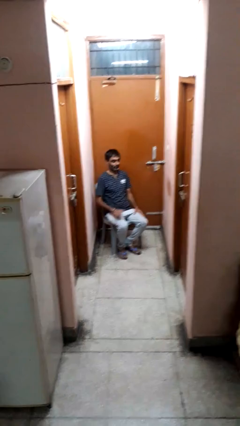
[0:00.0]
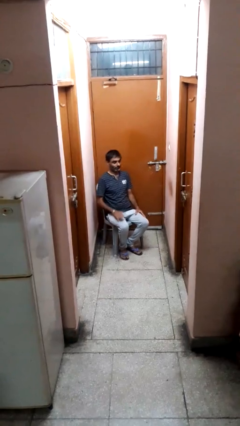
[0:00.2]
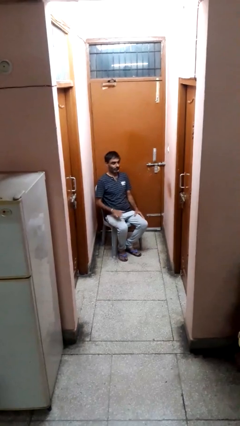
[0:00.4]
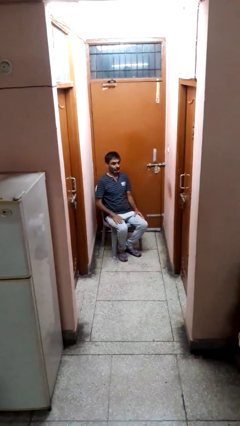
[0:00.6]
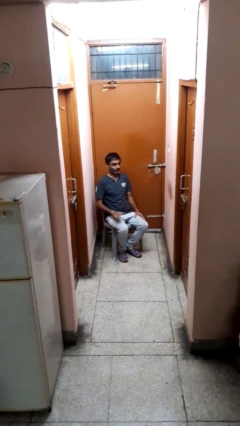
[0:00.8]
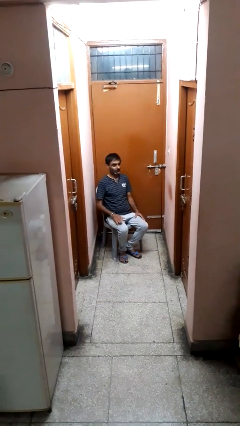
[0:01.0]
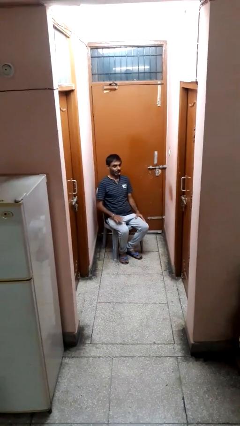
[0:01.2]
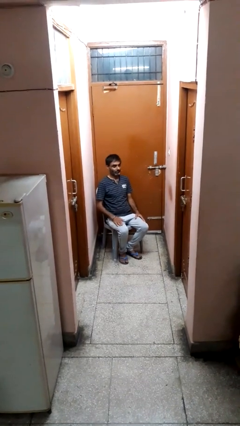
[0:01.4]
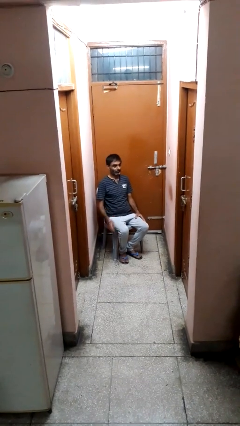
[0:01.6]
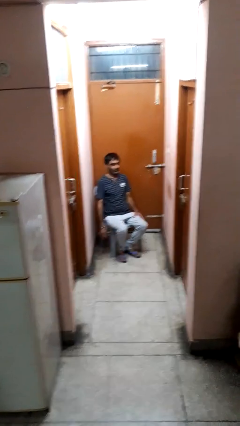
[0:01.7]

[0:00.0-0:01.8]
person slaps hands on thighs

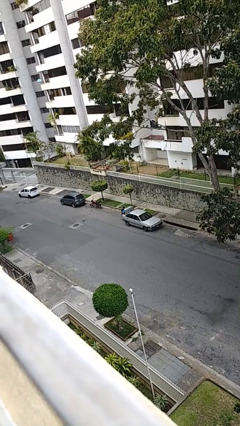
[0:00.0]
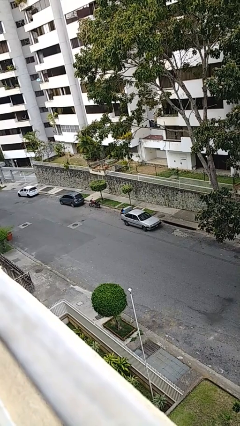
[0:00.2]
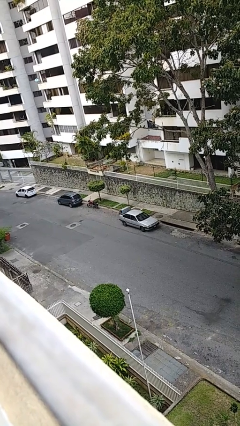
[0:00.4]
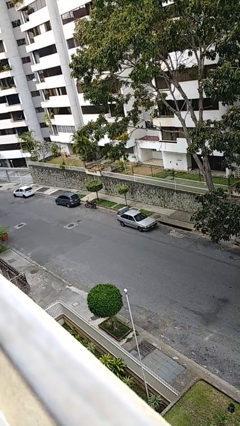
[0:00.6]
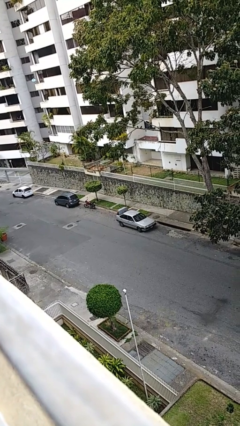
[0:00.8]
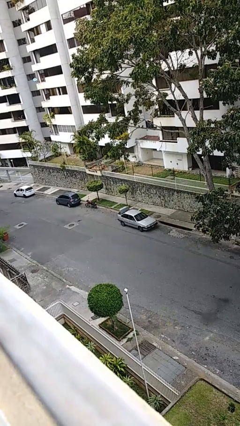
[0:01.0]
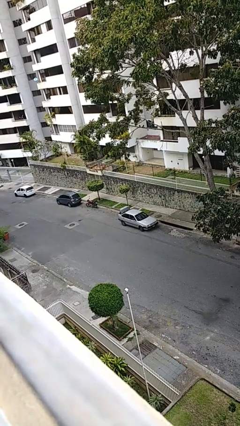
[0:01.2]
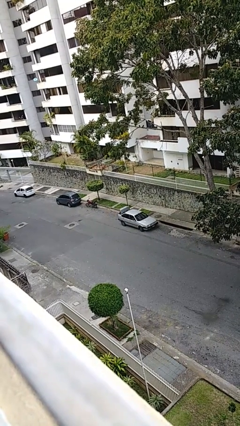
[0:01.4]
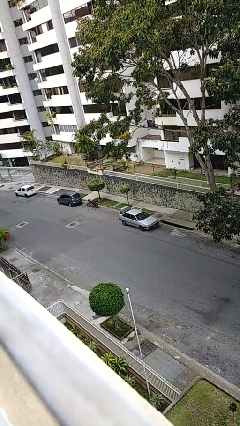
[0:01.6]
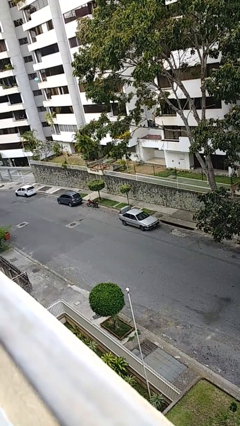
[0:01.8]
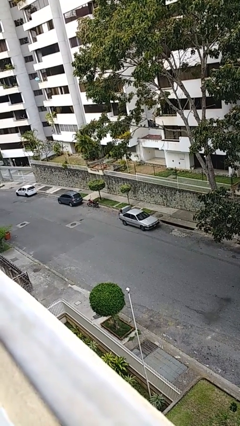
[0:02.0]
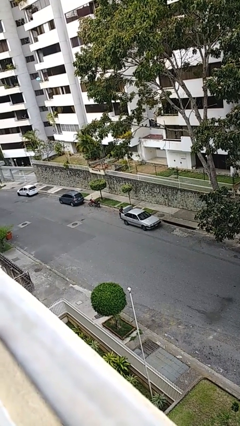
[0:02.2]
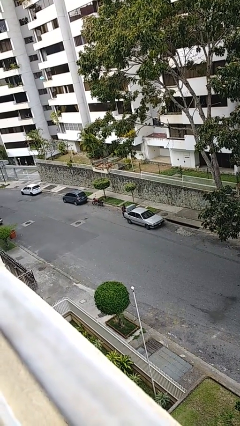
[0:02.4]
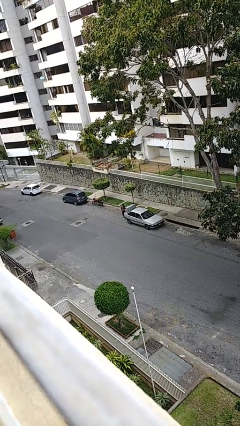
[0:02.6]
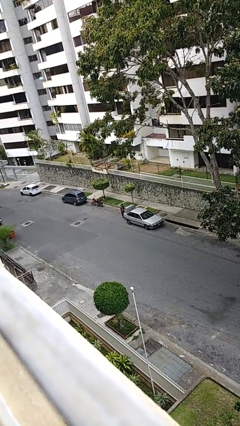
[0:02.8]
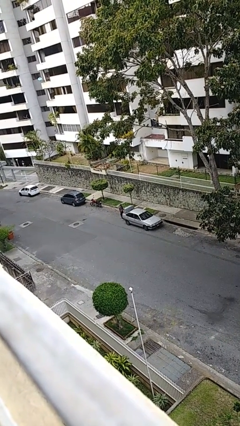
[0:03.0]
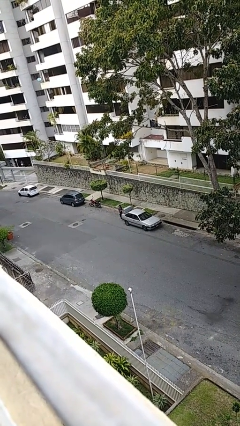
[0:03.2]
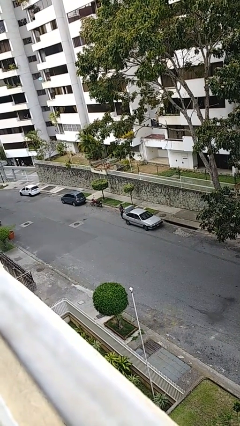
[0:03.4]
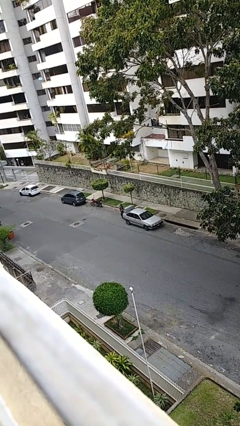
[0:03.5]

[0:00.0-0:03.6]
person loads car

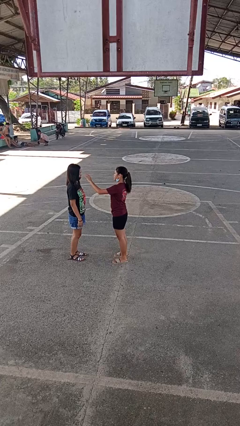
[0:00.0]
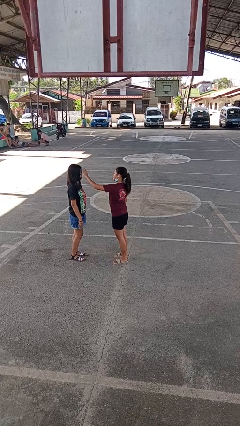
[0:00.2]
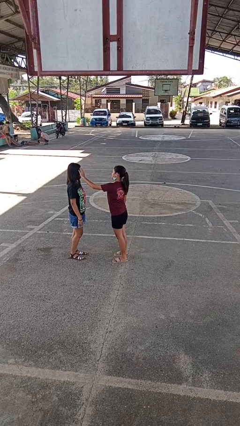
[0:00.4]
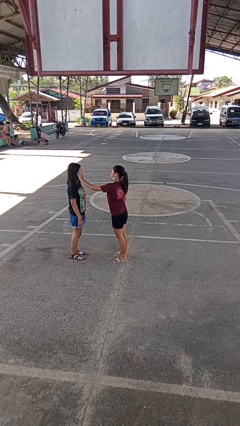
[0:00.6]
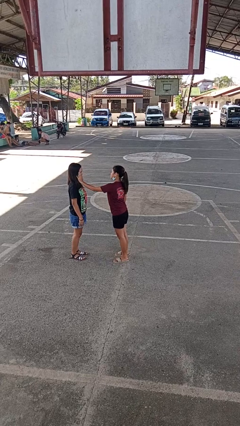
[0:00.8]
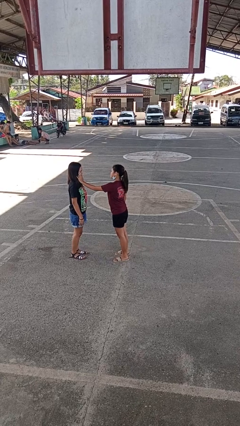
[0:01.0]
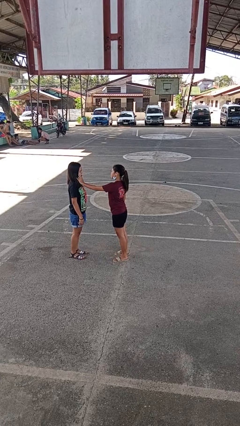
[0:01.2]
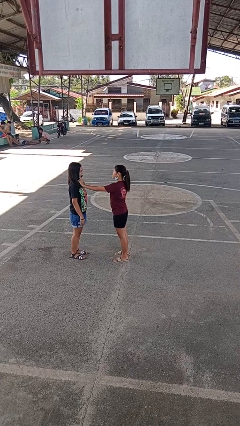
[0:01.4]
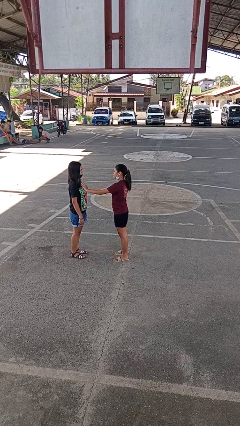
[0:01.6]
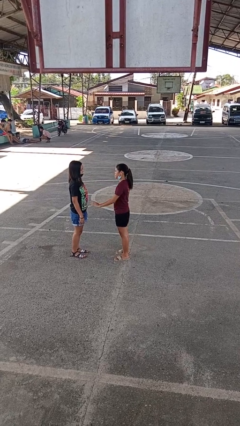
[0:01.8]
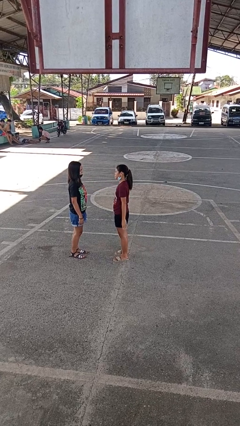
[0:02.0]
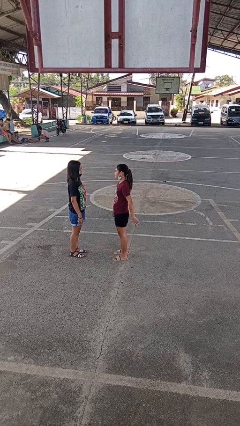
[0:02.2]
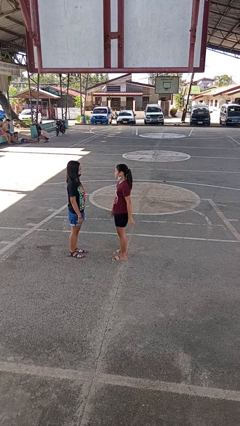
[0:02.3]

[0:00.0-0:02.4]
person touches face of person

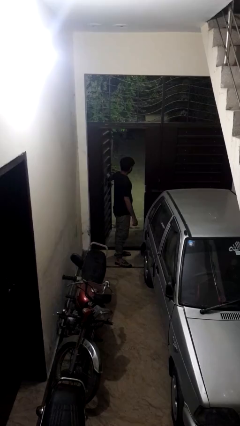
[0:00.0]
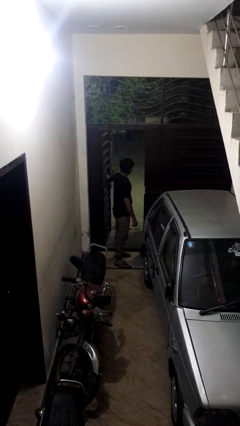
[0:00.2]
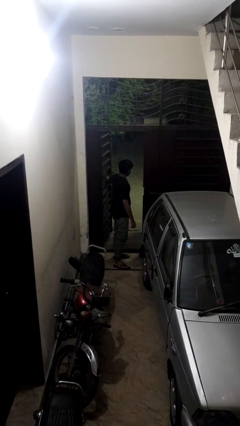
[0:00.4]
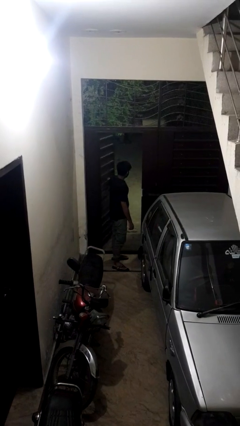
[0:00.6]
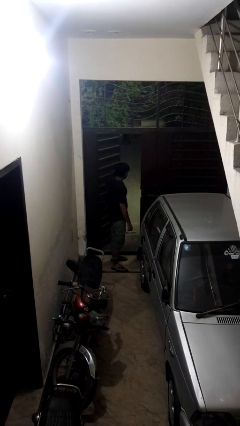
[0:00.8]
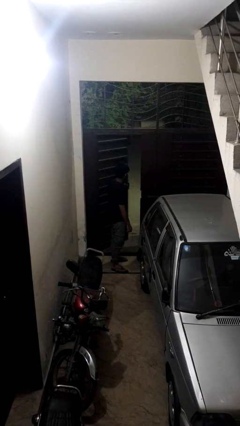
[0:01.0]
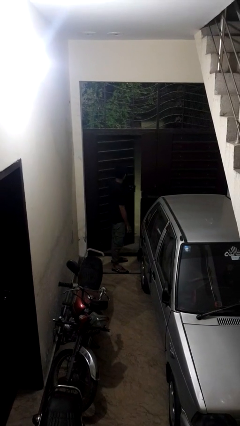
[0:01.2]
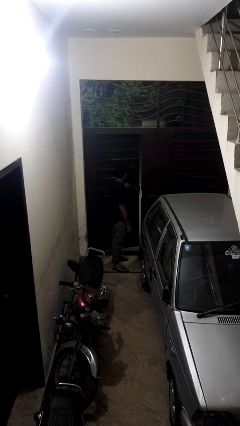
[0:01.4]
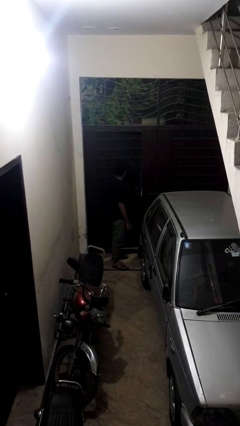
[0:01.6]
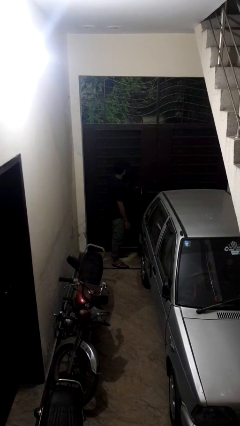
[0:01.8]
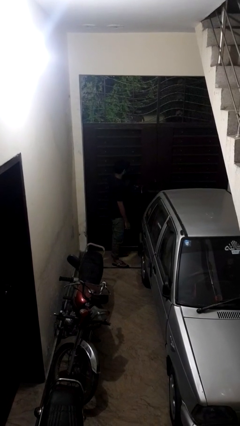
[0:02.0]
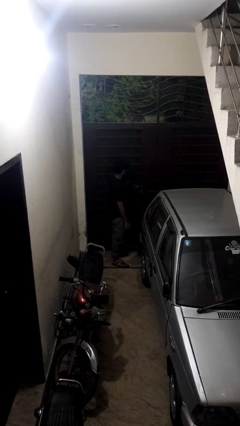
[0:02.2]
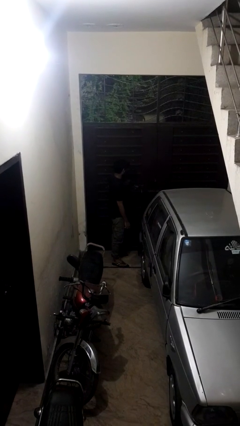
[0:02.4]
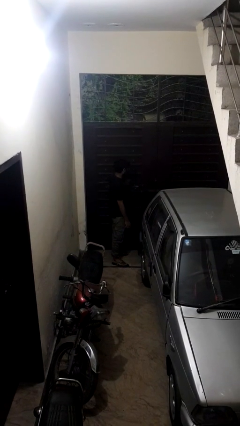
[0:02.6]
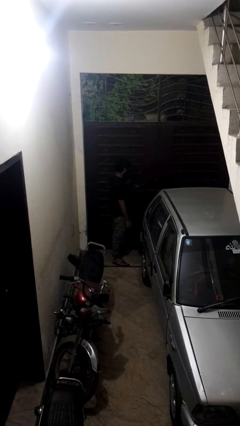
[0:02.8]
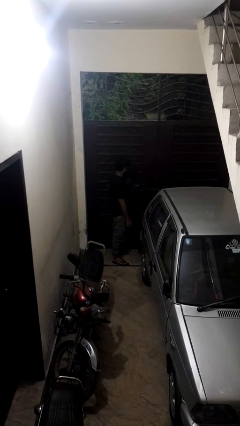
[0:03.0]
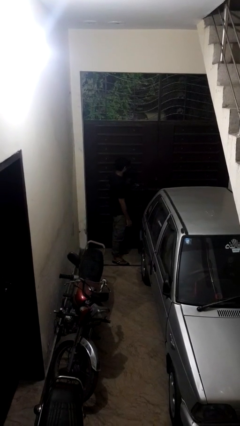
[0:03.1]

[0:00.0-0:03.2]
person closes gate

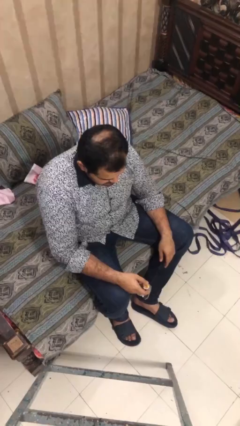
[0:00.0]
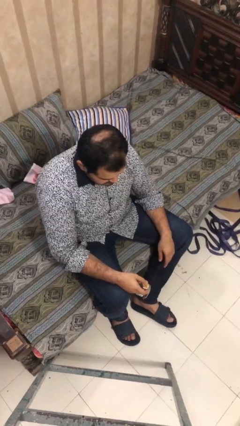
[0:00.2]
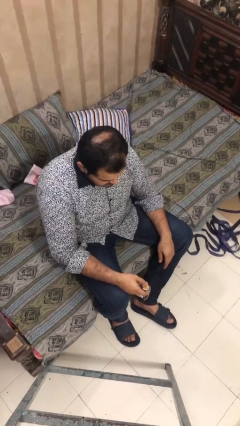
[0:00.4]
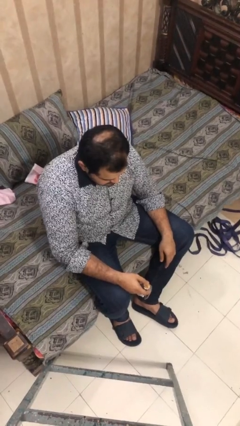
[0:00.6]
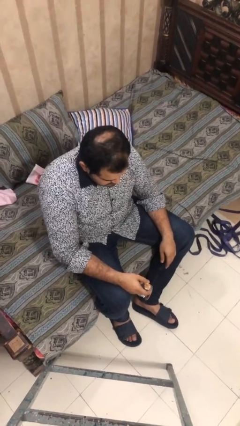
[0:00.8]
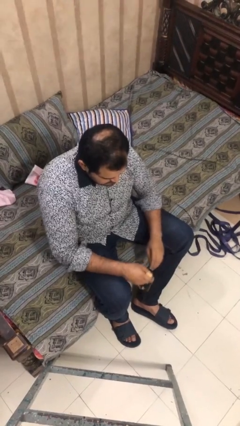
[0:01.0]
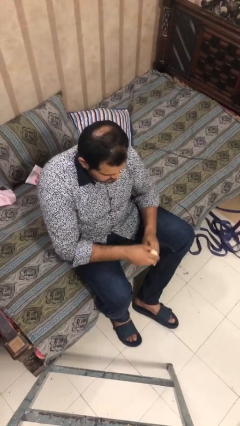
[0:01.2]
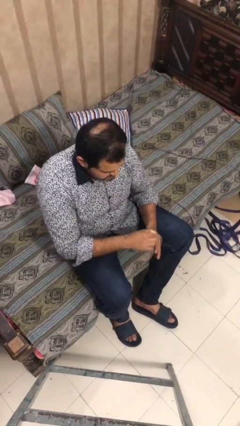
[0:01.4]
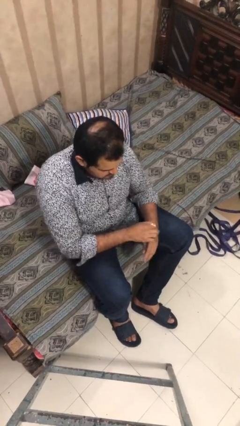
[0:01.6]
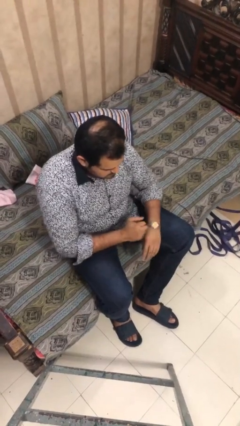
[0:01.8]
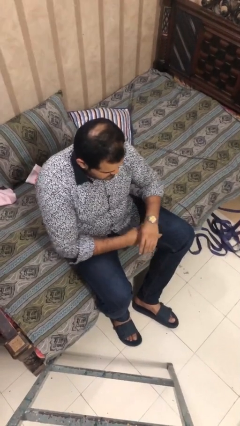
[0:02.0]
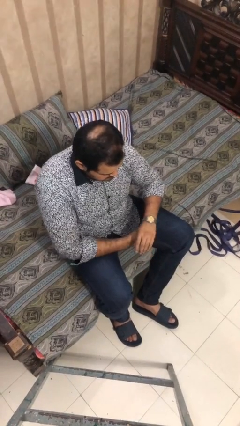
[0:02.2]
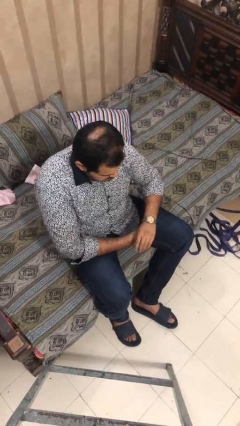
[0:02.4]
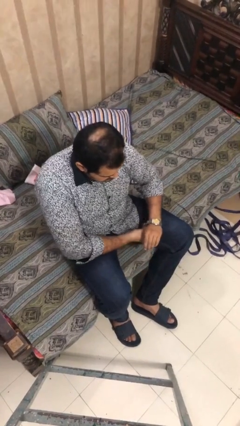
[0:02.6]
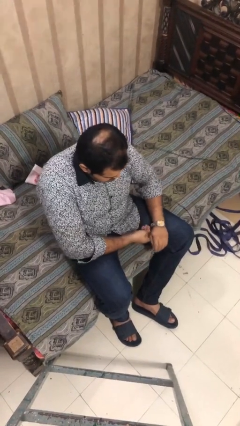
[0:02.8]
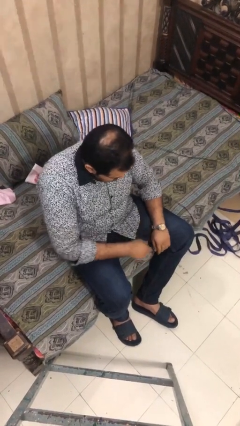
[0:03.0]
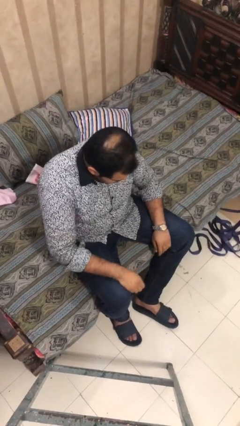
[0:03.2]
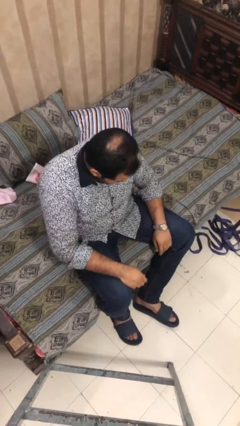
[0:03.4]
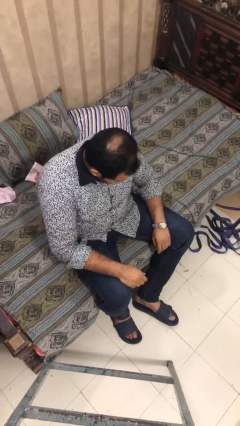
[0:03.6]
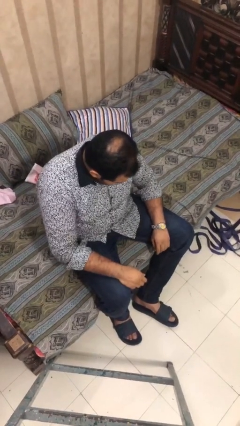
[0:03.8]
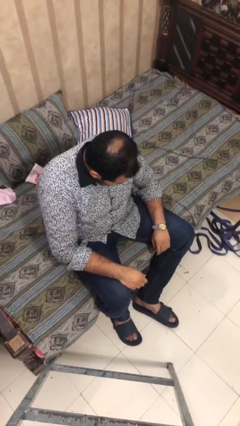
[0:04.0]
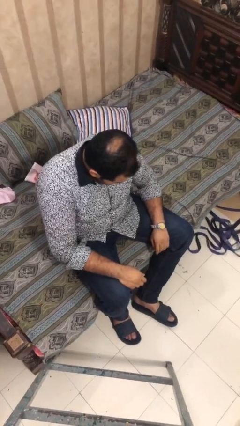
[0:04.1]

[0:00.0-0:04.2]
person puts on wristwatch

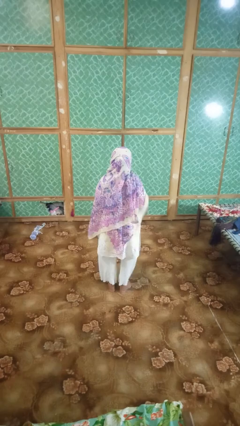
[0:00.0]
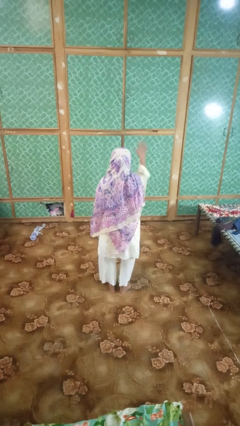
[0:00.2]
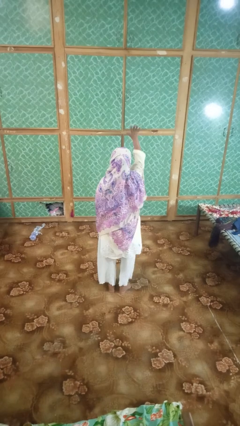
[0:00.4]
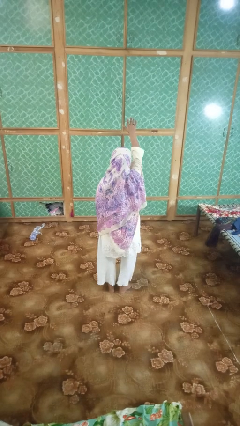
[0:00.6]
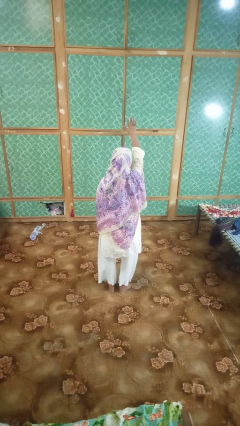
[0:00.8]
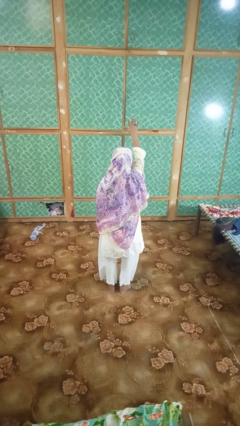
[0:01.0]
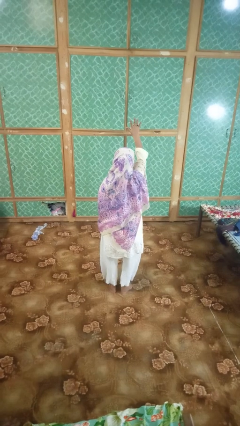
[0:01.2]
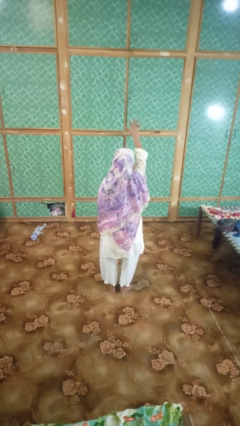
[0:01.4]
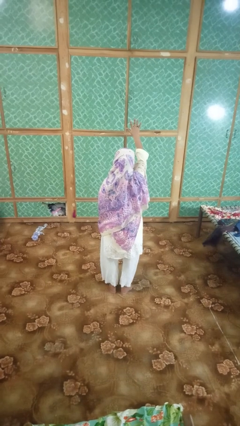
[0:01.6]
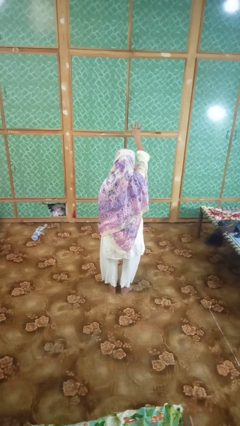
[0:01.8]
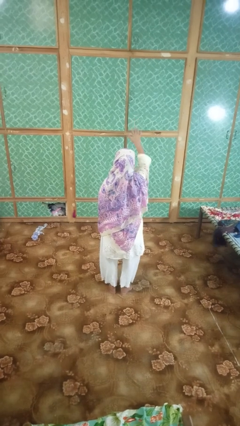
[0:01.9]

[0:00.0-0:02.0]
person gestures number five

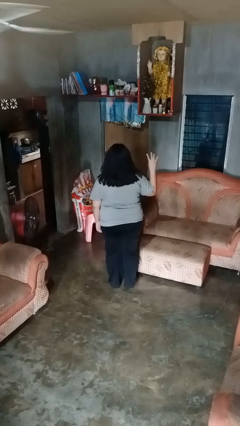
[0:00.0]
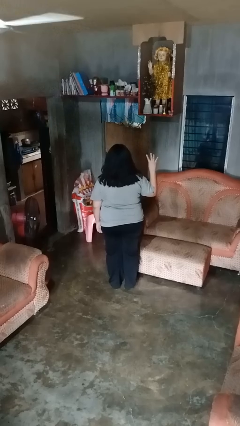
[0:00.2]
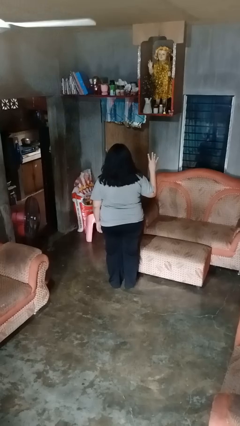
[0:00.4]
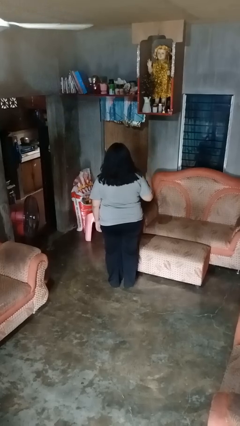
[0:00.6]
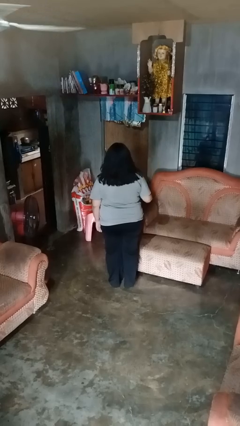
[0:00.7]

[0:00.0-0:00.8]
person gestures number four
